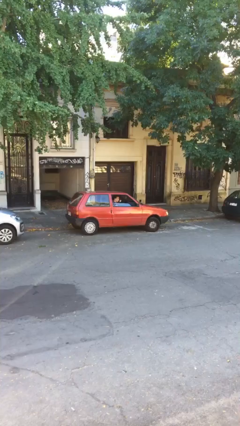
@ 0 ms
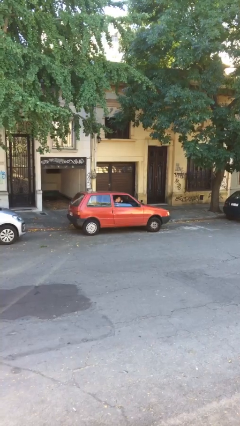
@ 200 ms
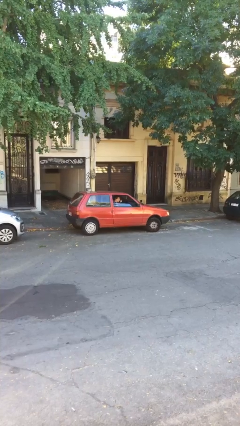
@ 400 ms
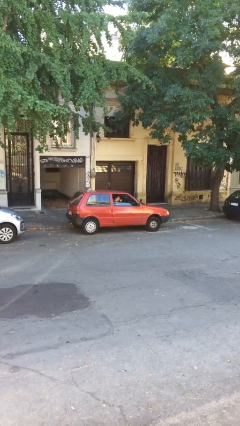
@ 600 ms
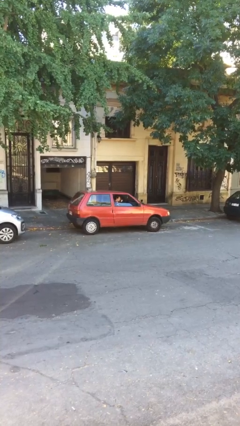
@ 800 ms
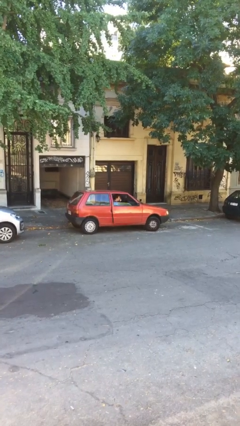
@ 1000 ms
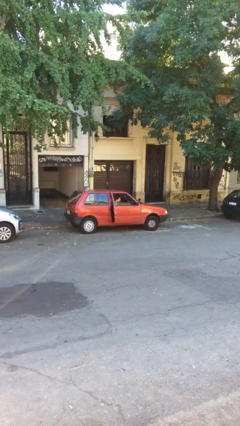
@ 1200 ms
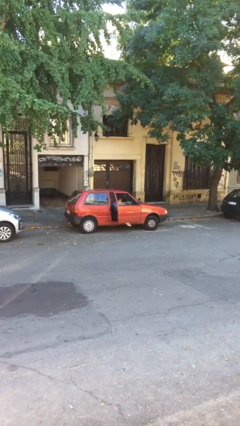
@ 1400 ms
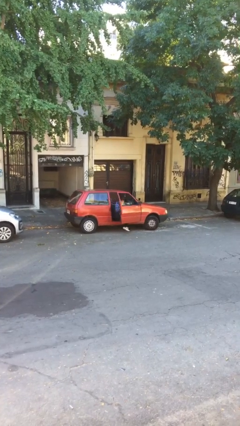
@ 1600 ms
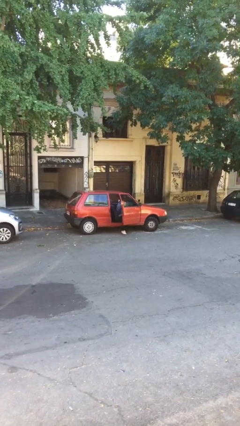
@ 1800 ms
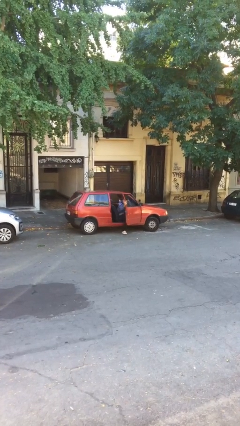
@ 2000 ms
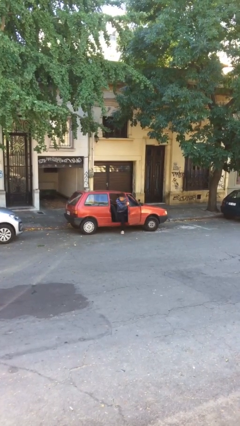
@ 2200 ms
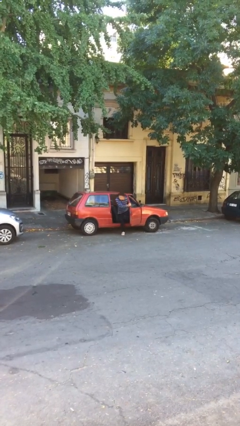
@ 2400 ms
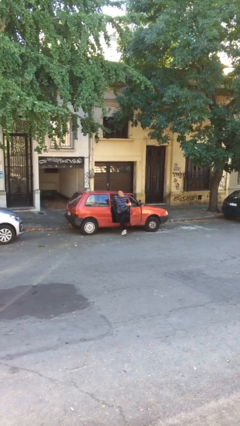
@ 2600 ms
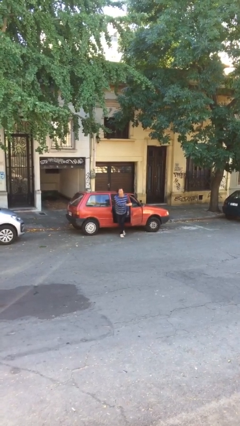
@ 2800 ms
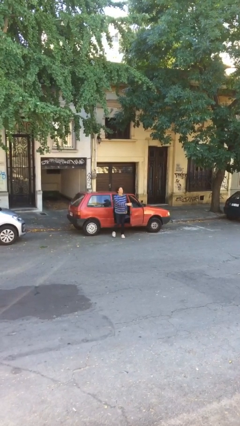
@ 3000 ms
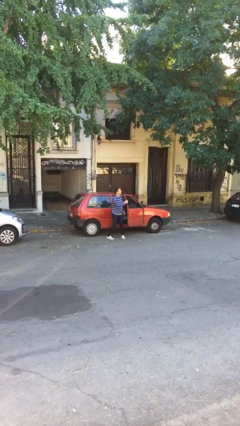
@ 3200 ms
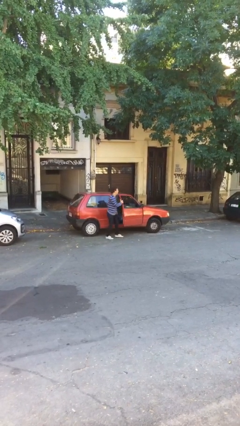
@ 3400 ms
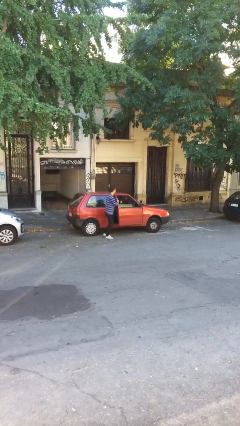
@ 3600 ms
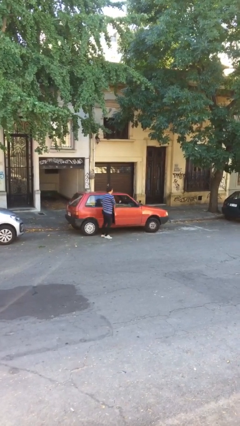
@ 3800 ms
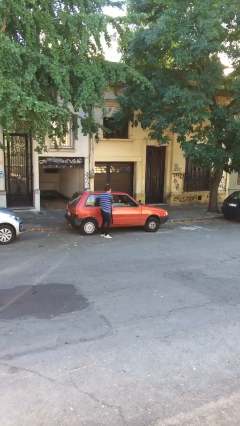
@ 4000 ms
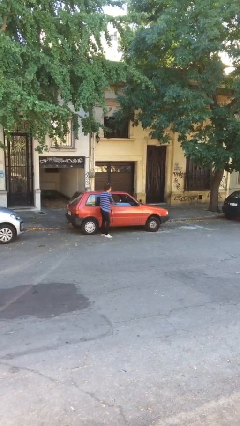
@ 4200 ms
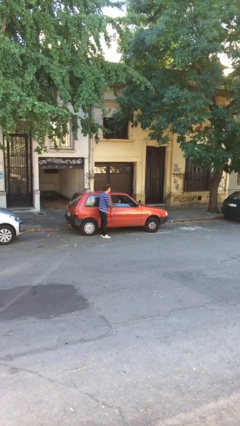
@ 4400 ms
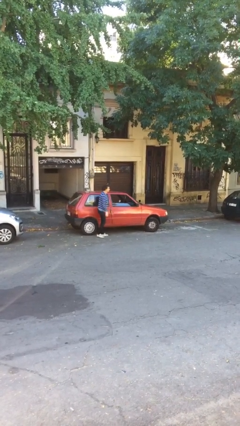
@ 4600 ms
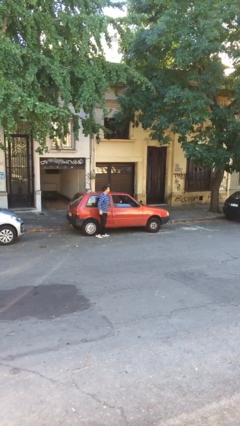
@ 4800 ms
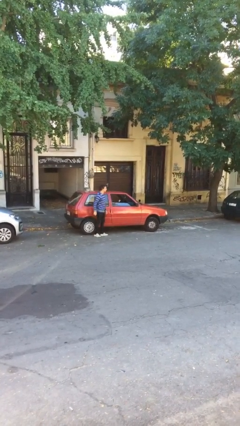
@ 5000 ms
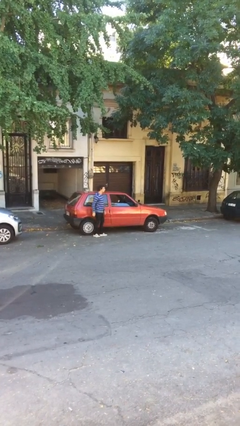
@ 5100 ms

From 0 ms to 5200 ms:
car drops off person

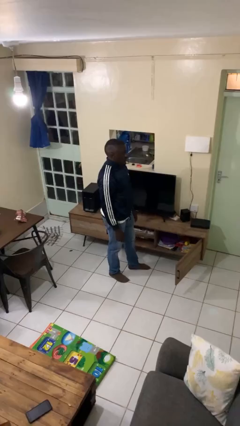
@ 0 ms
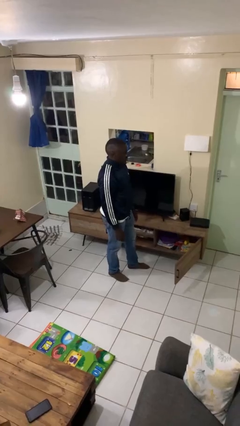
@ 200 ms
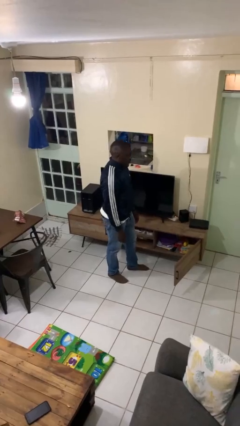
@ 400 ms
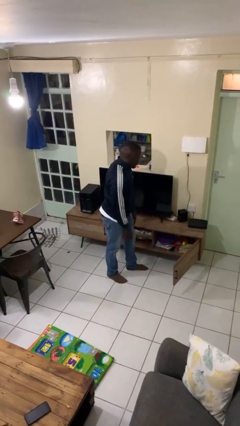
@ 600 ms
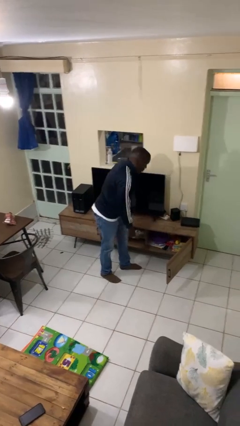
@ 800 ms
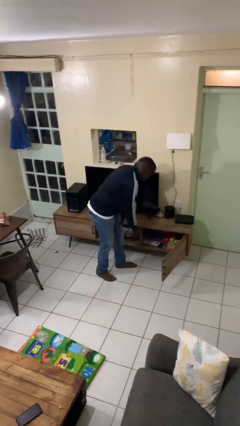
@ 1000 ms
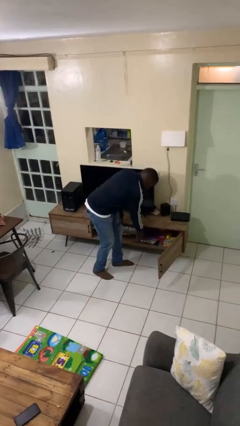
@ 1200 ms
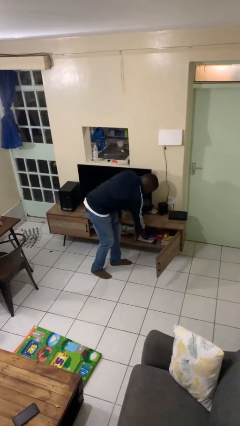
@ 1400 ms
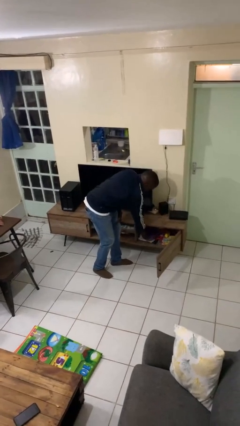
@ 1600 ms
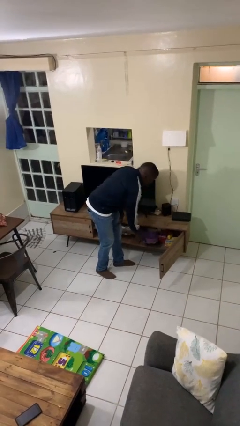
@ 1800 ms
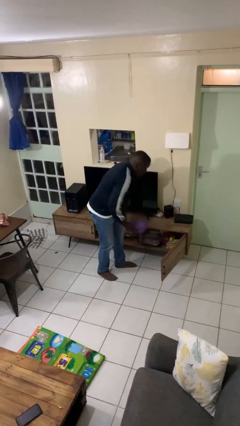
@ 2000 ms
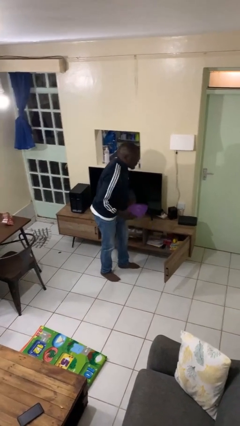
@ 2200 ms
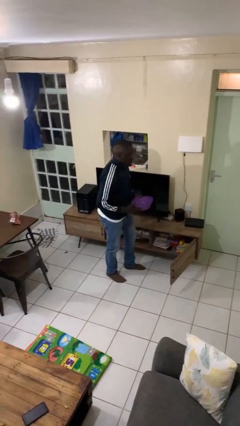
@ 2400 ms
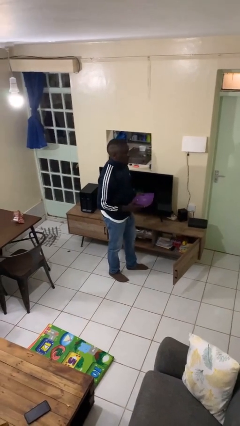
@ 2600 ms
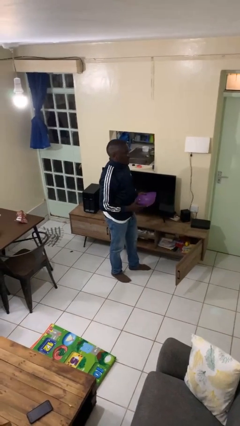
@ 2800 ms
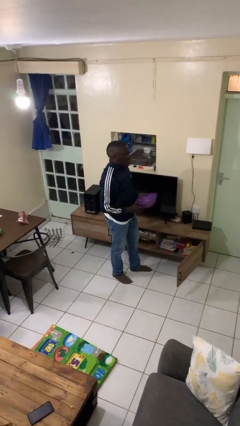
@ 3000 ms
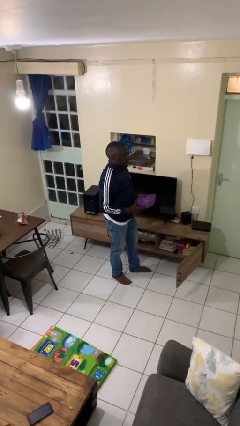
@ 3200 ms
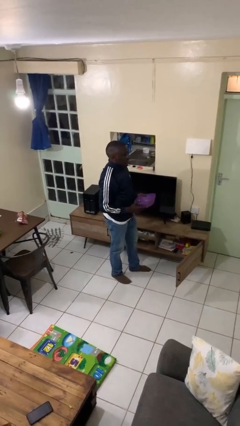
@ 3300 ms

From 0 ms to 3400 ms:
person picks up object from cabinet

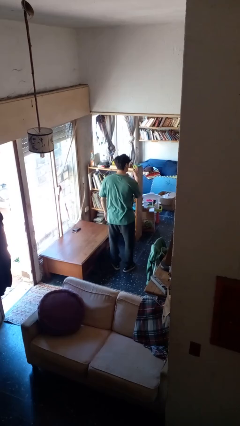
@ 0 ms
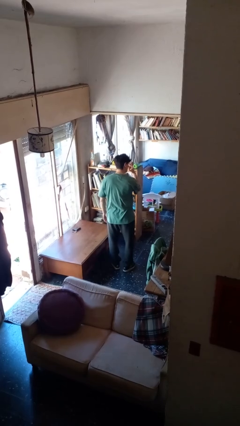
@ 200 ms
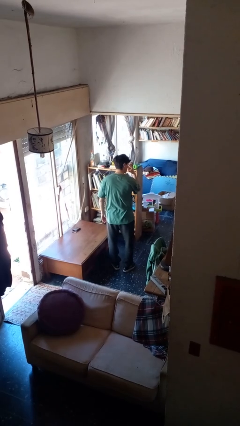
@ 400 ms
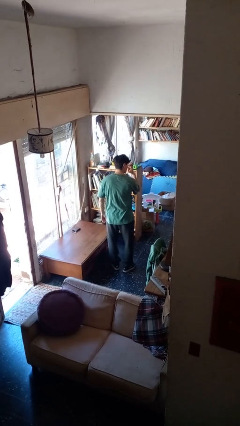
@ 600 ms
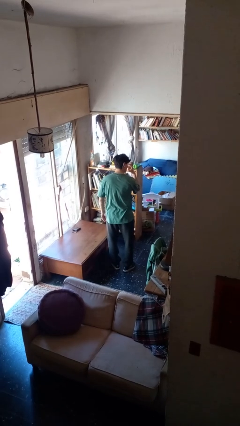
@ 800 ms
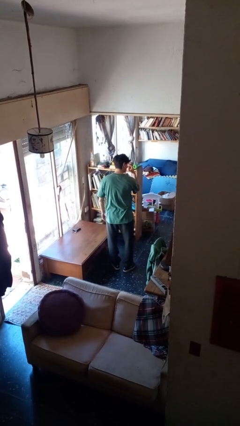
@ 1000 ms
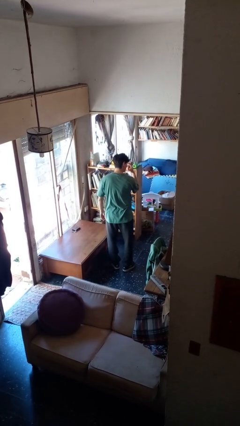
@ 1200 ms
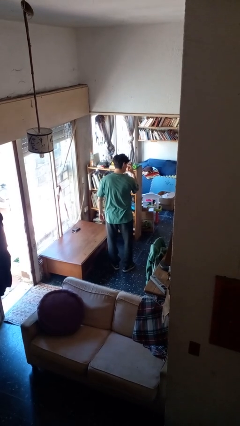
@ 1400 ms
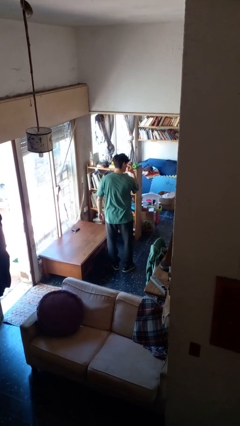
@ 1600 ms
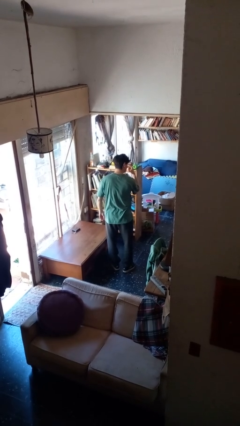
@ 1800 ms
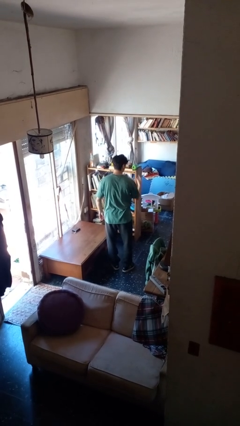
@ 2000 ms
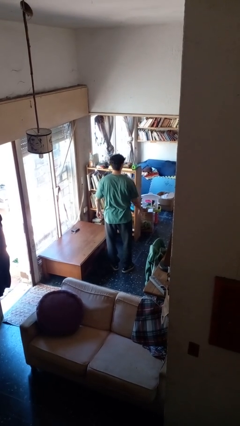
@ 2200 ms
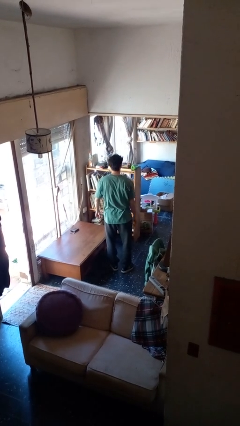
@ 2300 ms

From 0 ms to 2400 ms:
person gestures watch closely

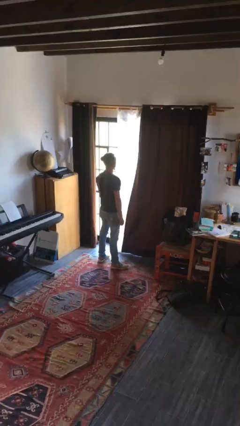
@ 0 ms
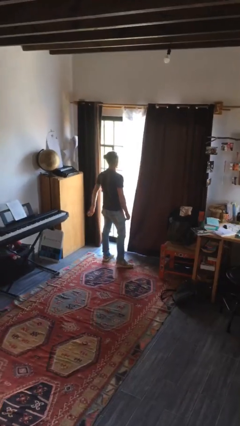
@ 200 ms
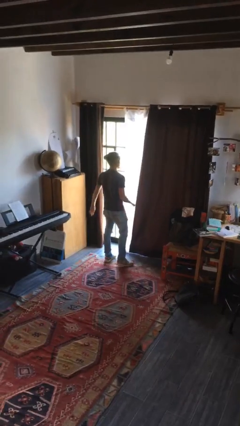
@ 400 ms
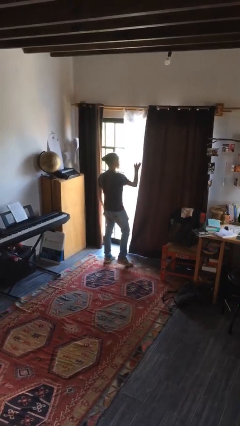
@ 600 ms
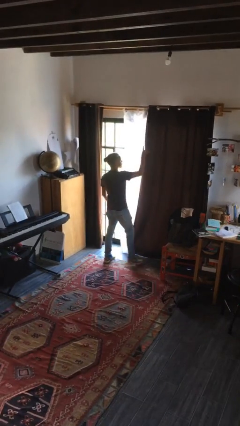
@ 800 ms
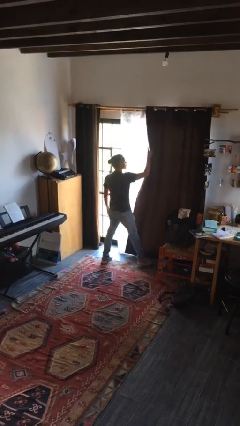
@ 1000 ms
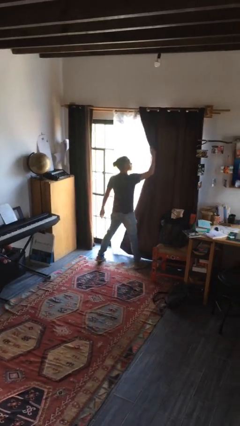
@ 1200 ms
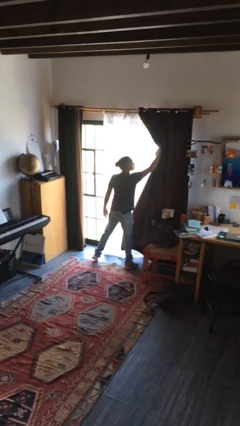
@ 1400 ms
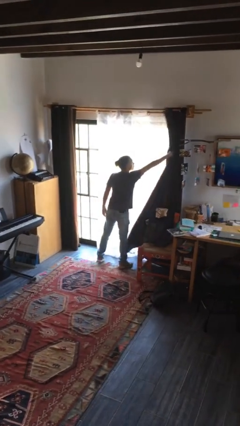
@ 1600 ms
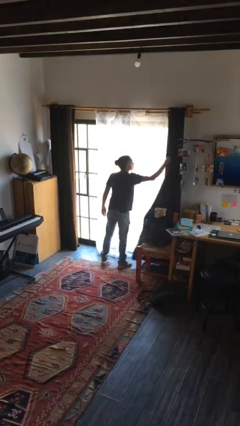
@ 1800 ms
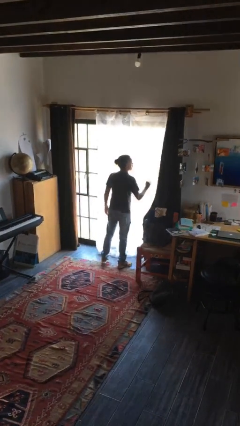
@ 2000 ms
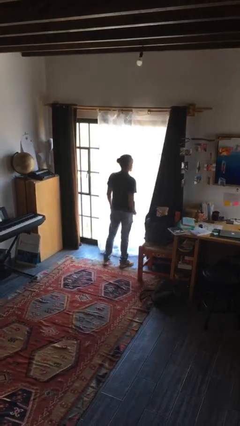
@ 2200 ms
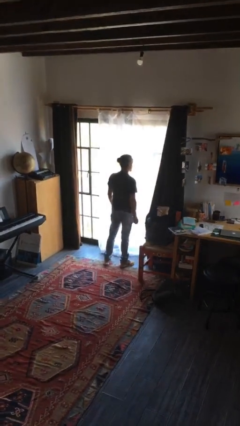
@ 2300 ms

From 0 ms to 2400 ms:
person opens curtains

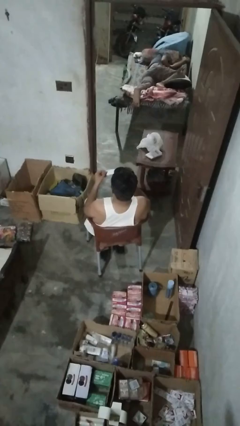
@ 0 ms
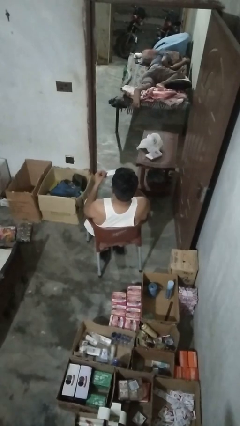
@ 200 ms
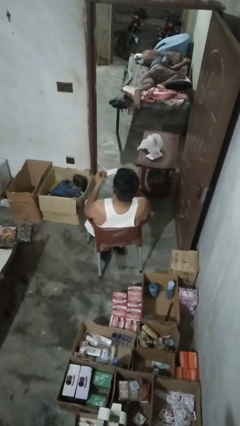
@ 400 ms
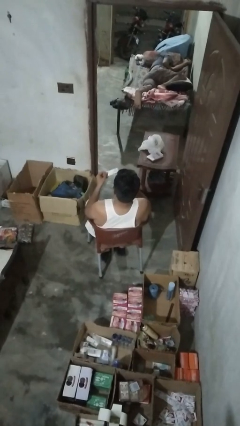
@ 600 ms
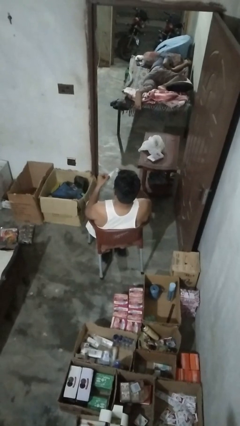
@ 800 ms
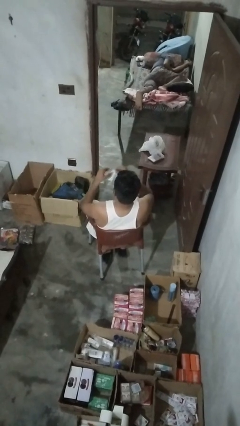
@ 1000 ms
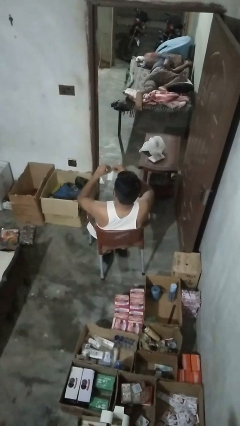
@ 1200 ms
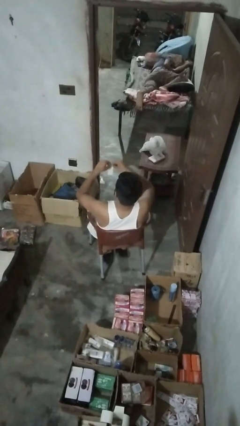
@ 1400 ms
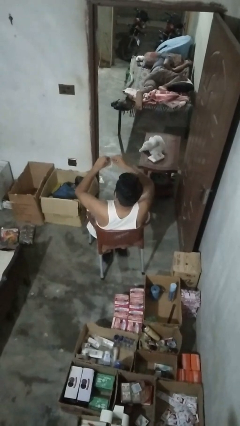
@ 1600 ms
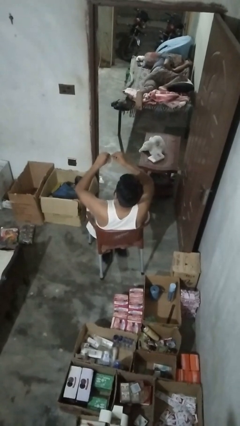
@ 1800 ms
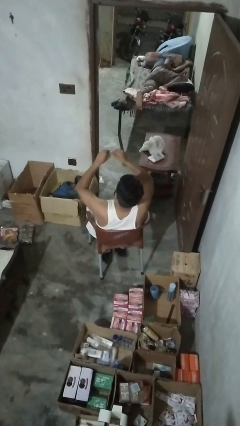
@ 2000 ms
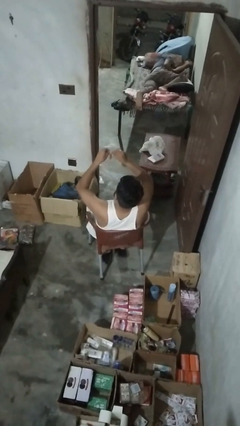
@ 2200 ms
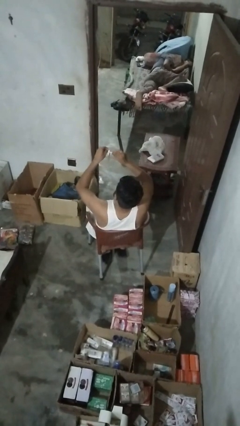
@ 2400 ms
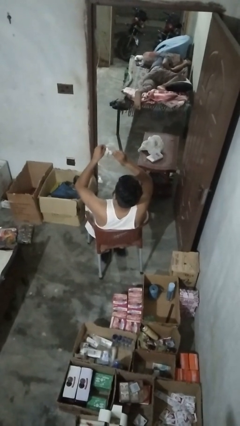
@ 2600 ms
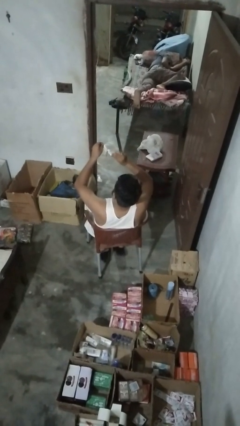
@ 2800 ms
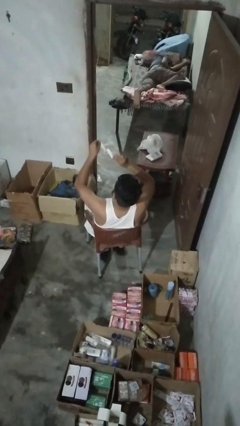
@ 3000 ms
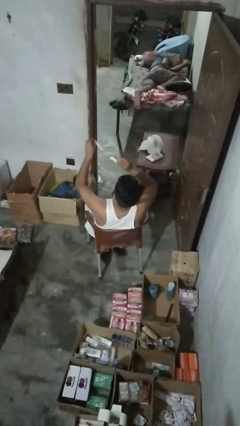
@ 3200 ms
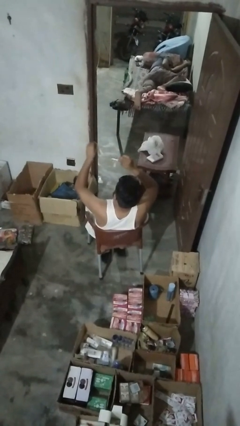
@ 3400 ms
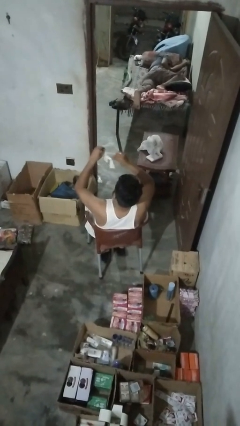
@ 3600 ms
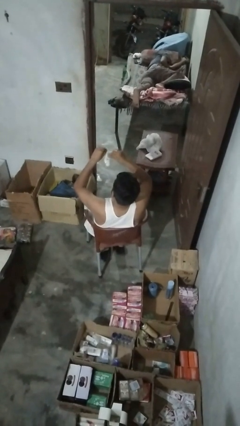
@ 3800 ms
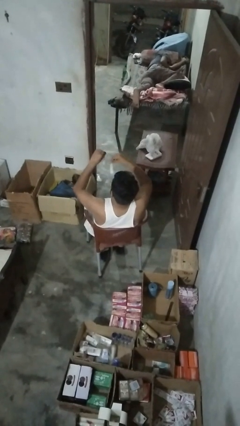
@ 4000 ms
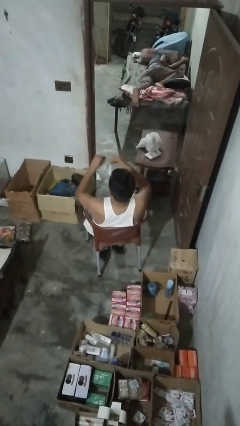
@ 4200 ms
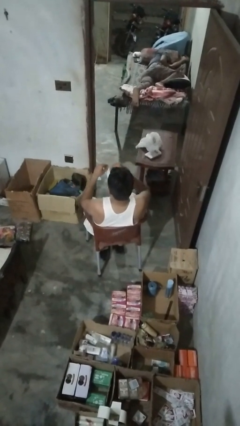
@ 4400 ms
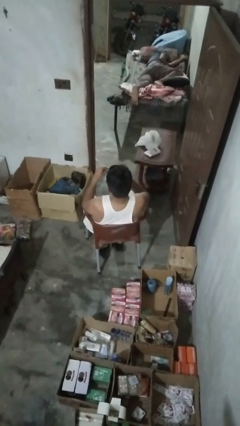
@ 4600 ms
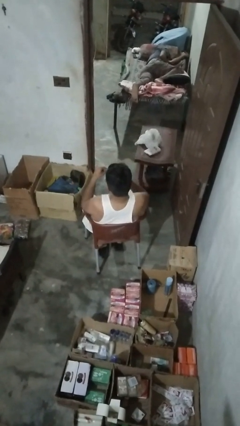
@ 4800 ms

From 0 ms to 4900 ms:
person tears paper
